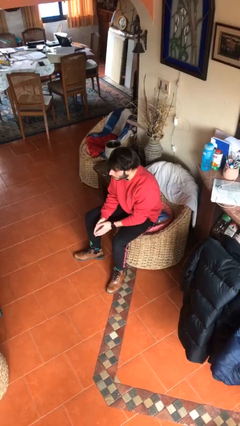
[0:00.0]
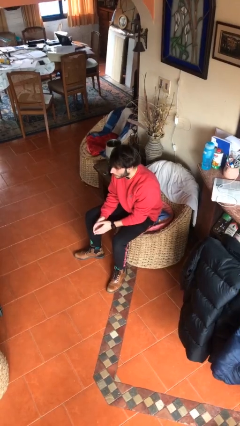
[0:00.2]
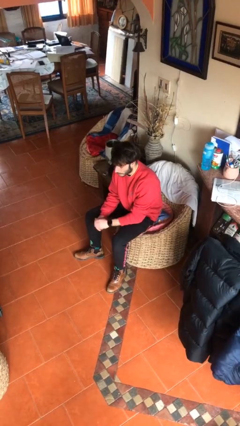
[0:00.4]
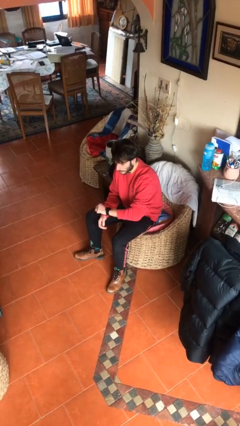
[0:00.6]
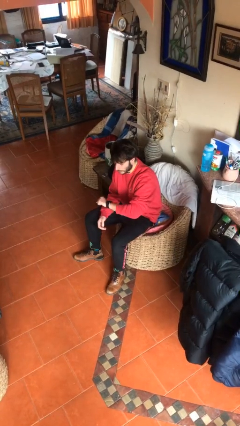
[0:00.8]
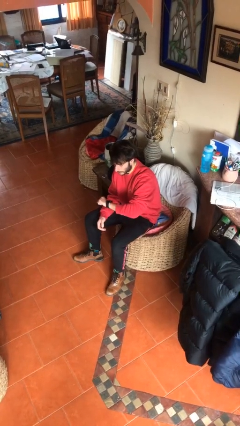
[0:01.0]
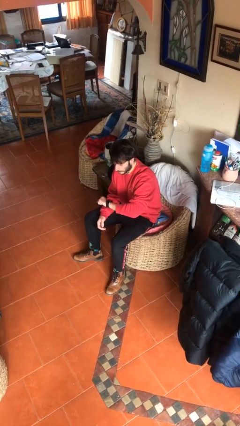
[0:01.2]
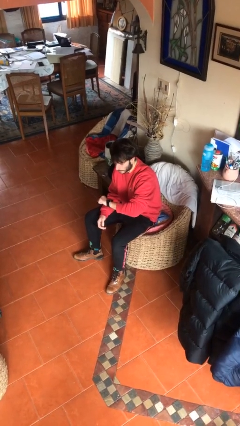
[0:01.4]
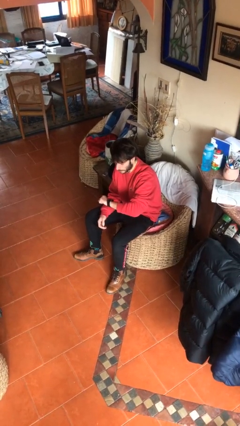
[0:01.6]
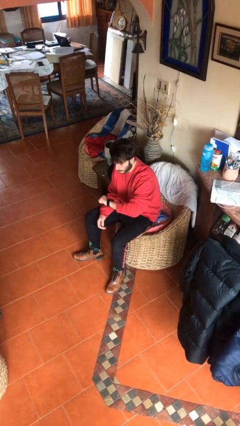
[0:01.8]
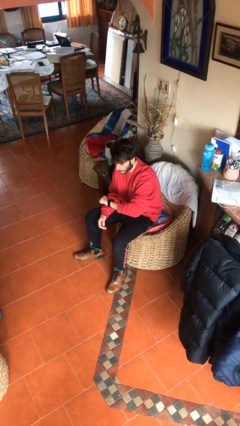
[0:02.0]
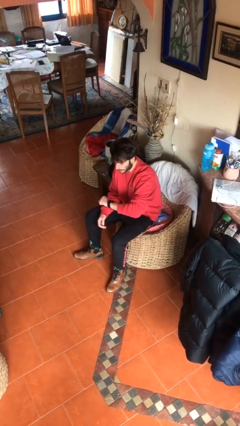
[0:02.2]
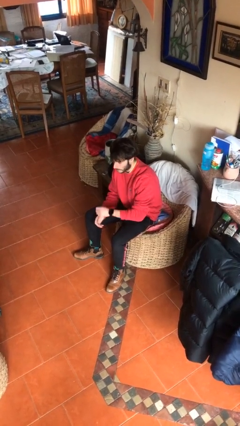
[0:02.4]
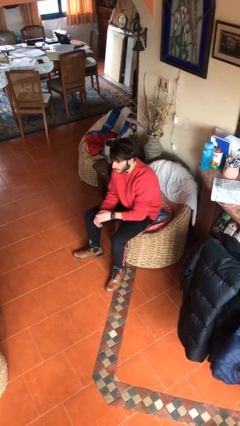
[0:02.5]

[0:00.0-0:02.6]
person looks at wristwatch

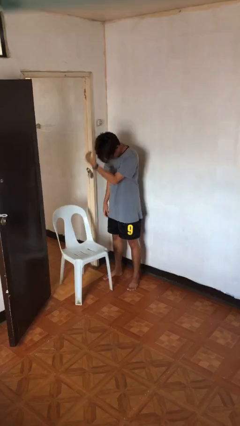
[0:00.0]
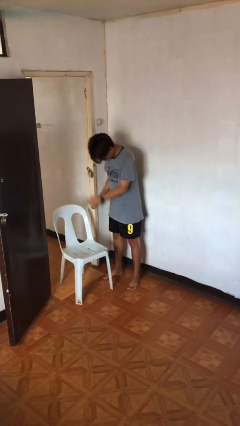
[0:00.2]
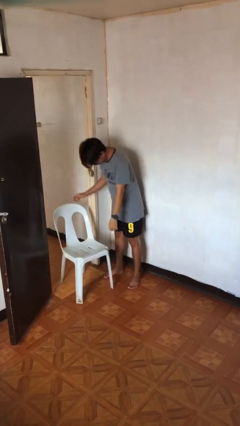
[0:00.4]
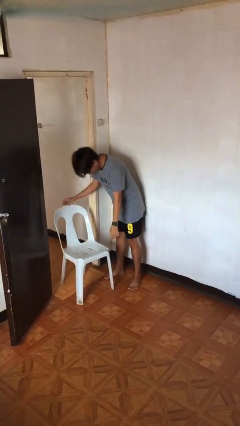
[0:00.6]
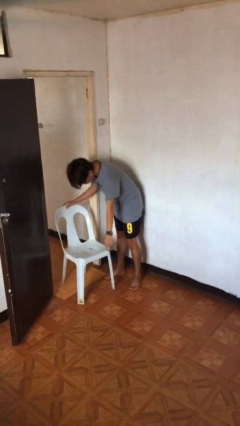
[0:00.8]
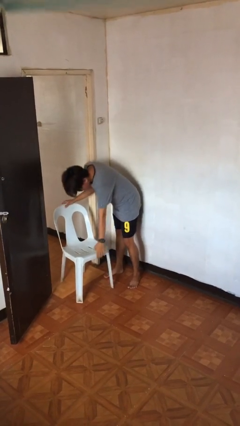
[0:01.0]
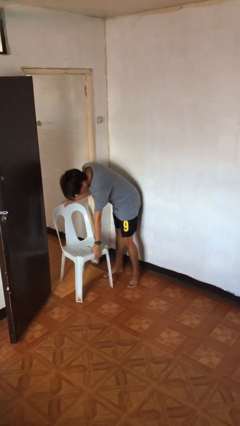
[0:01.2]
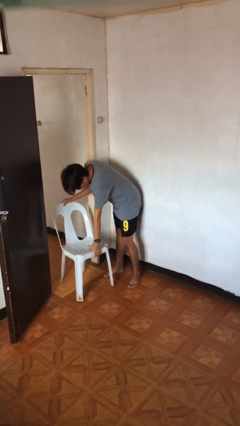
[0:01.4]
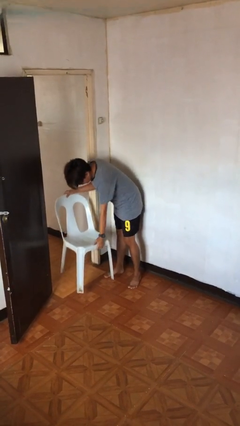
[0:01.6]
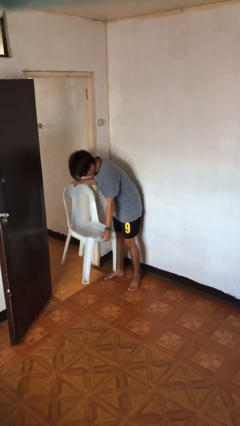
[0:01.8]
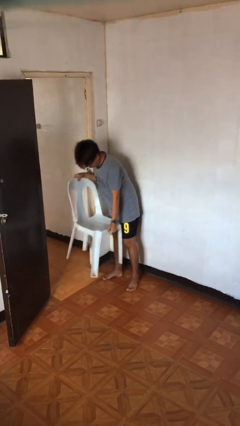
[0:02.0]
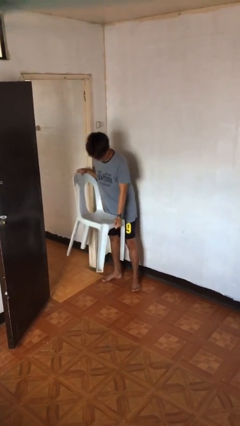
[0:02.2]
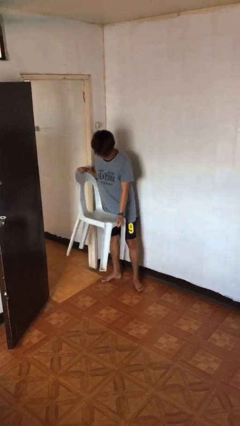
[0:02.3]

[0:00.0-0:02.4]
person picks up object from floor

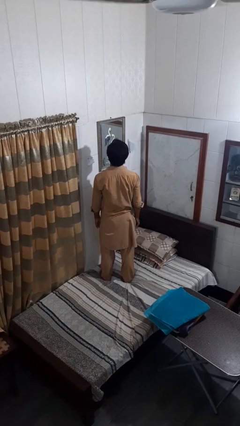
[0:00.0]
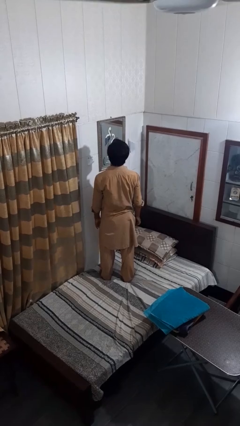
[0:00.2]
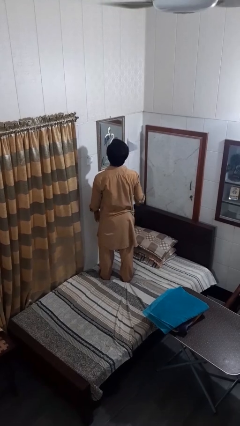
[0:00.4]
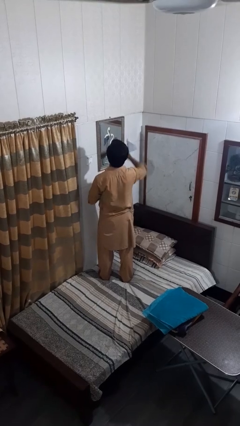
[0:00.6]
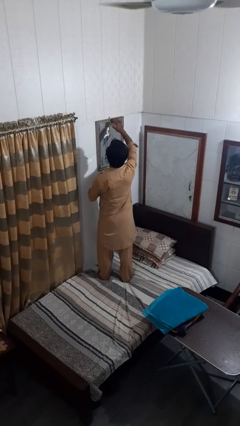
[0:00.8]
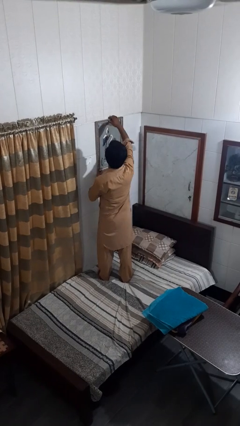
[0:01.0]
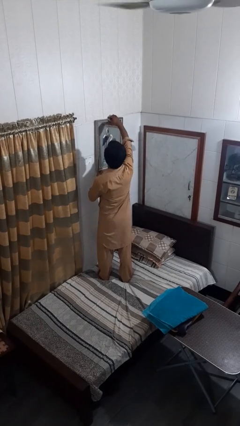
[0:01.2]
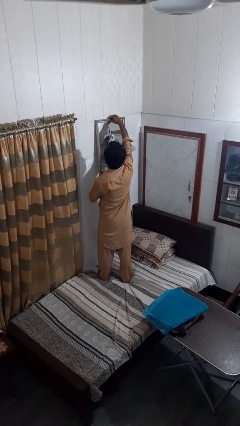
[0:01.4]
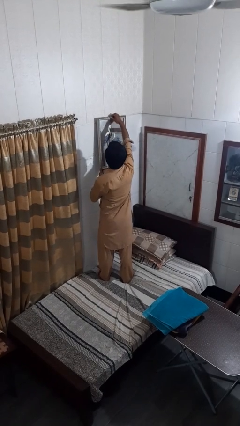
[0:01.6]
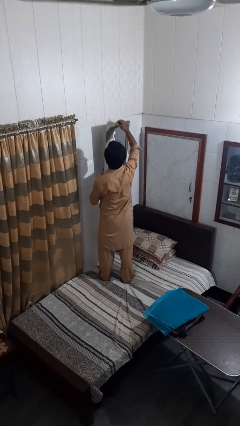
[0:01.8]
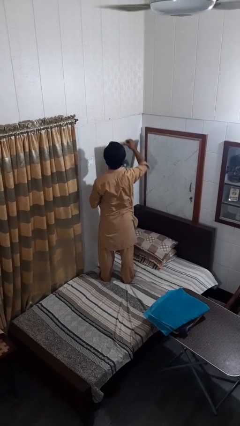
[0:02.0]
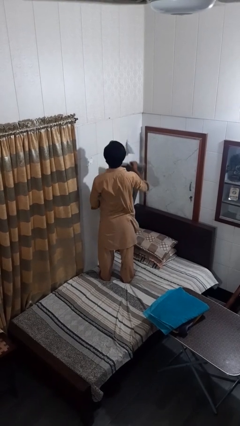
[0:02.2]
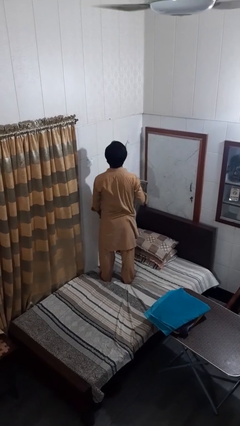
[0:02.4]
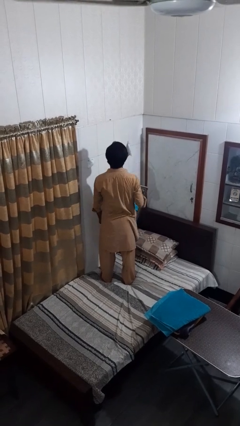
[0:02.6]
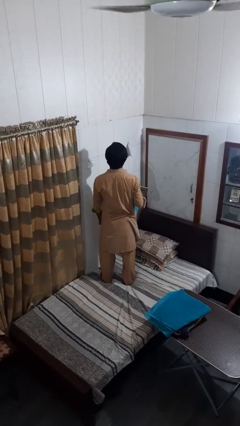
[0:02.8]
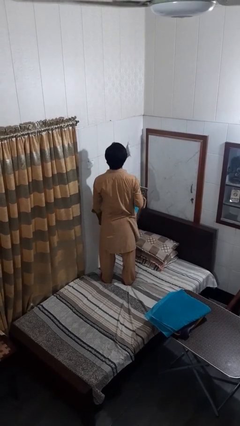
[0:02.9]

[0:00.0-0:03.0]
person takes down picture frame

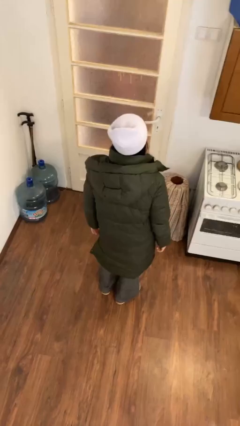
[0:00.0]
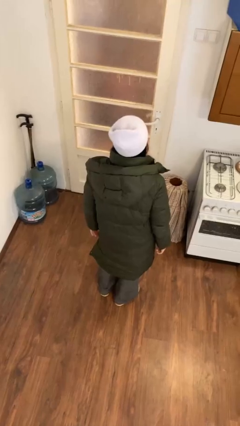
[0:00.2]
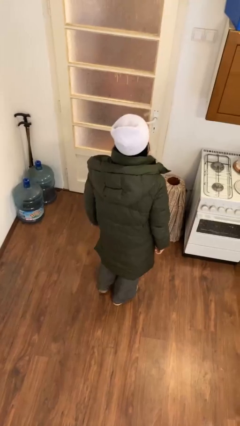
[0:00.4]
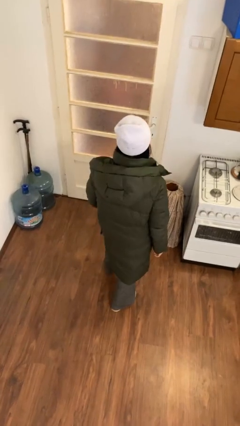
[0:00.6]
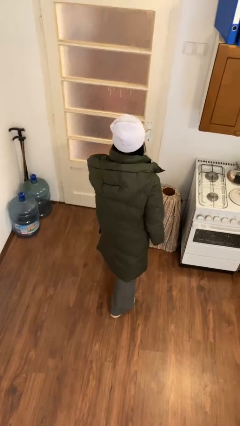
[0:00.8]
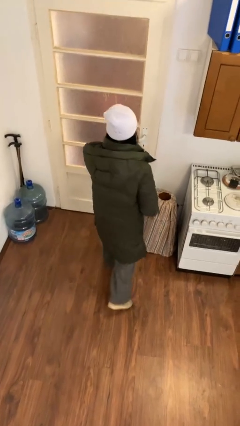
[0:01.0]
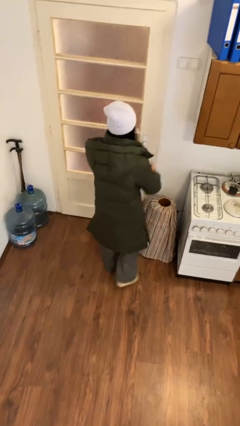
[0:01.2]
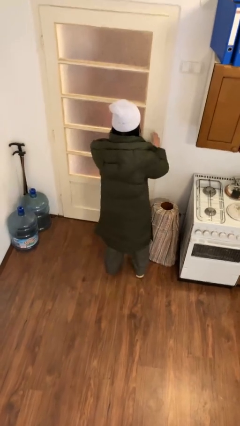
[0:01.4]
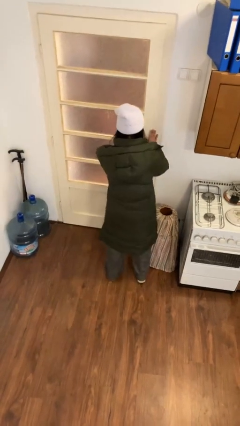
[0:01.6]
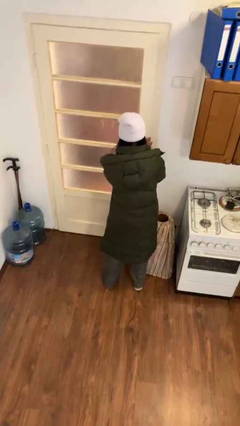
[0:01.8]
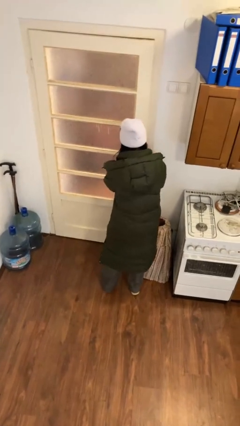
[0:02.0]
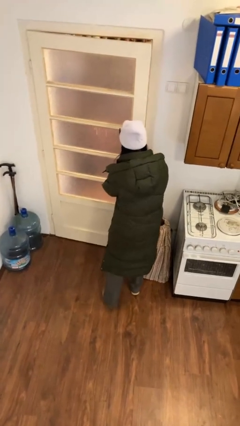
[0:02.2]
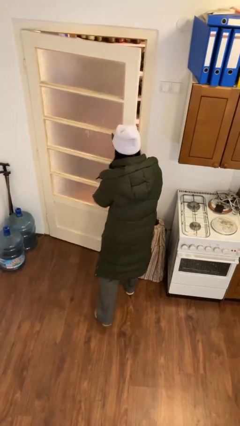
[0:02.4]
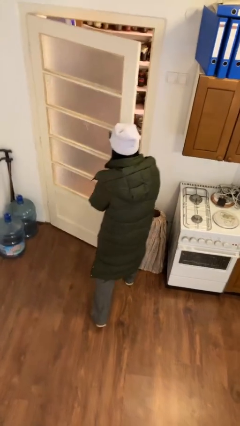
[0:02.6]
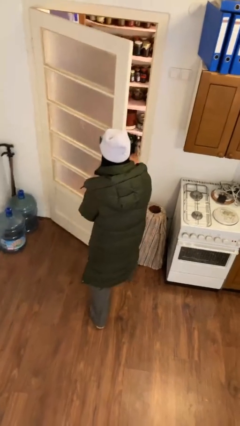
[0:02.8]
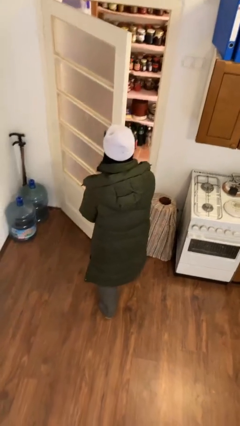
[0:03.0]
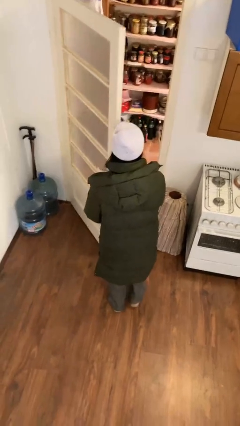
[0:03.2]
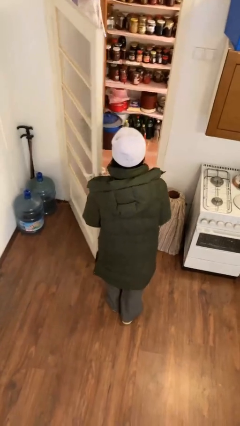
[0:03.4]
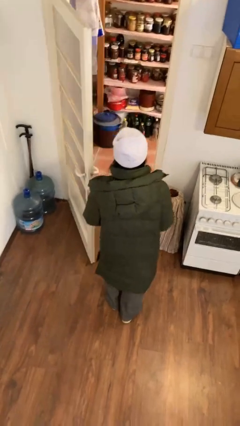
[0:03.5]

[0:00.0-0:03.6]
person opens facility door

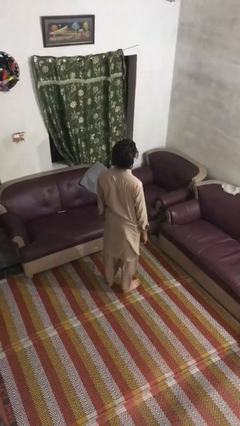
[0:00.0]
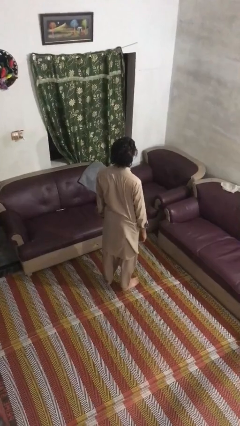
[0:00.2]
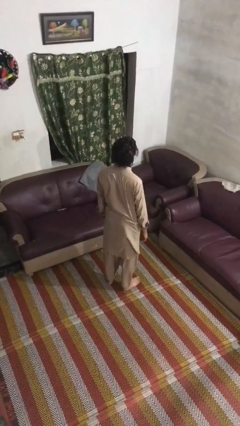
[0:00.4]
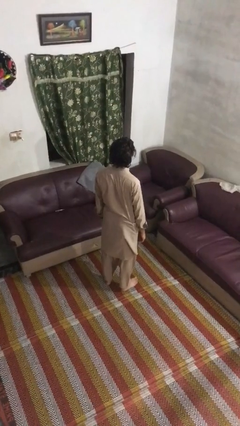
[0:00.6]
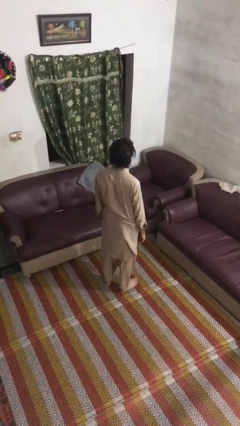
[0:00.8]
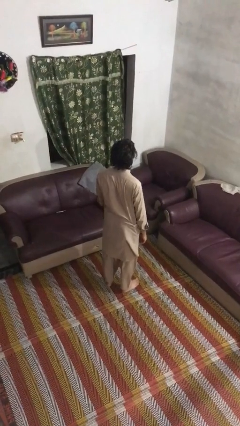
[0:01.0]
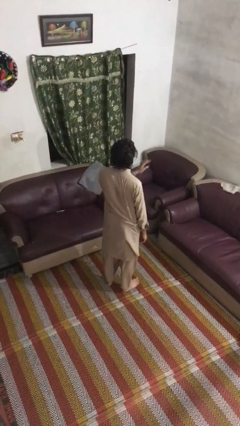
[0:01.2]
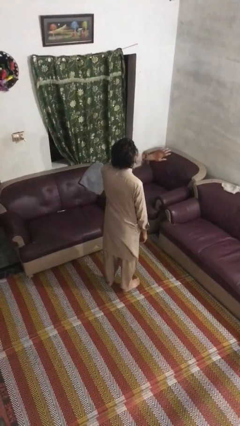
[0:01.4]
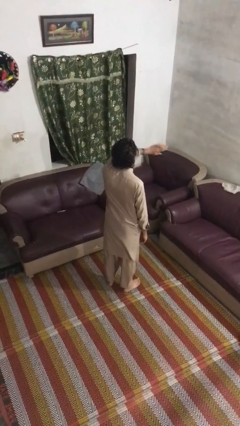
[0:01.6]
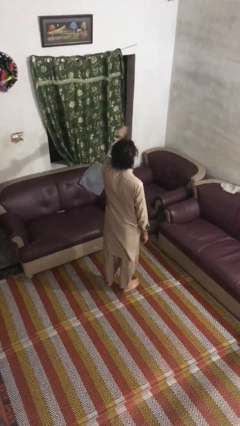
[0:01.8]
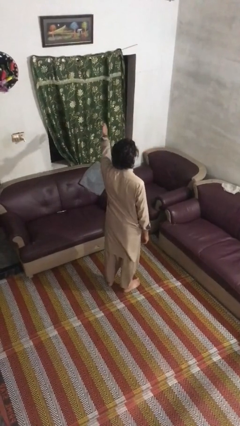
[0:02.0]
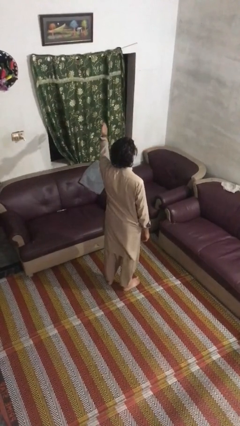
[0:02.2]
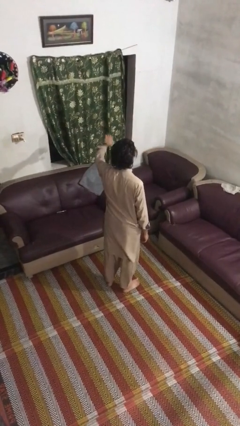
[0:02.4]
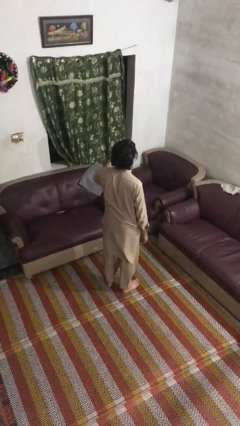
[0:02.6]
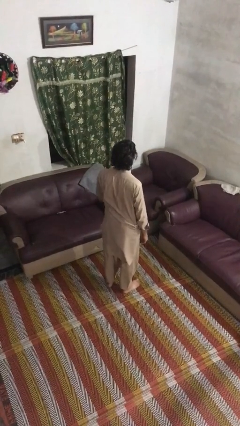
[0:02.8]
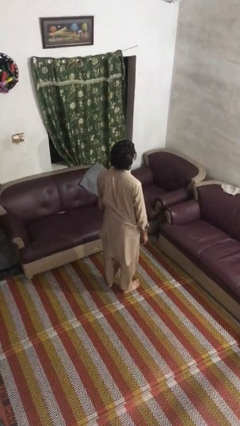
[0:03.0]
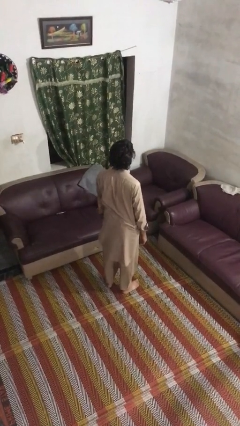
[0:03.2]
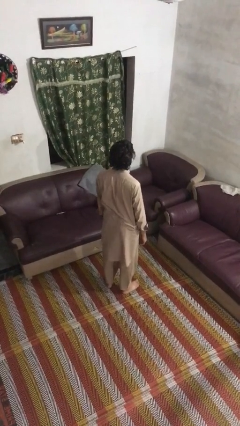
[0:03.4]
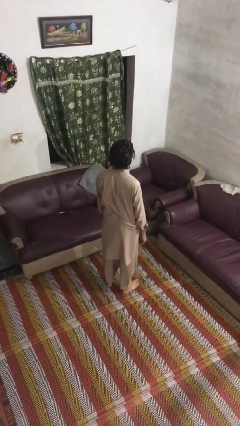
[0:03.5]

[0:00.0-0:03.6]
person gestures swipe left

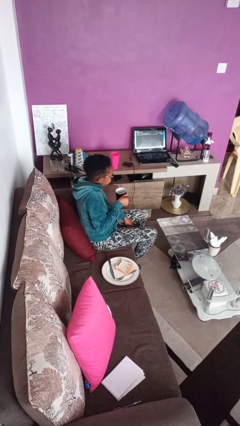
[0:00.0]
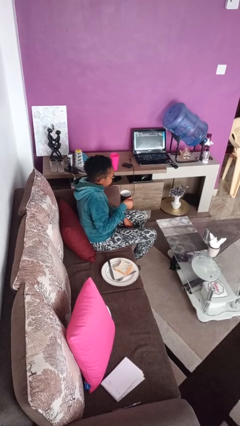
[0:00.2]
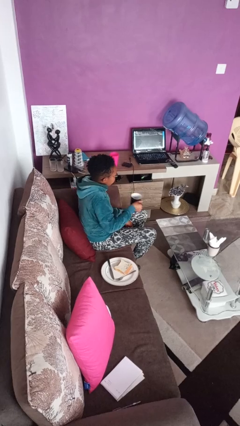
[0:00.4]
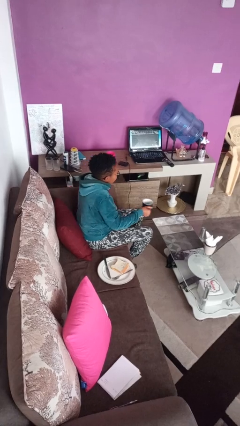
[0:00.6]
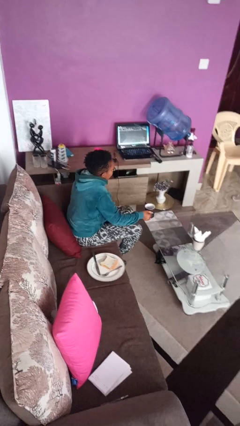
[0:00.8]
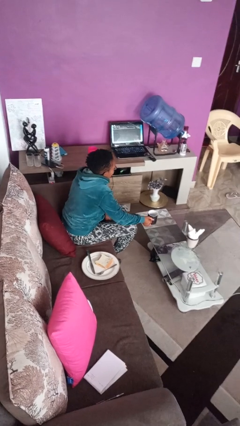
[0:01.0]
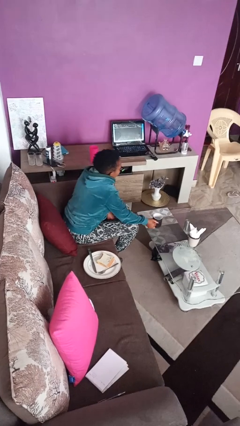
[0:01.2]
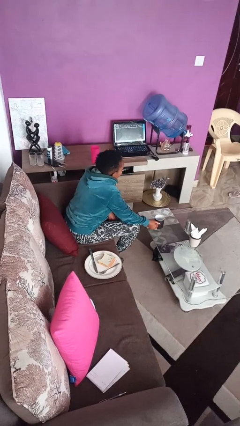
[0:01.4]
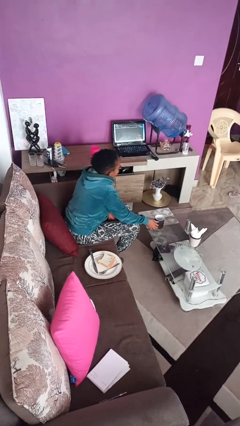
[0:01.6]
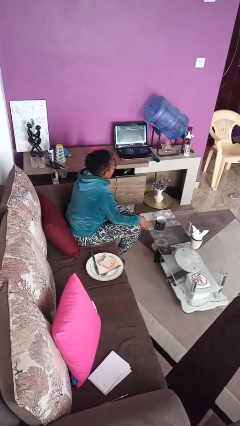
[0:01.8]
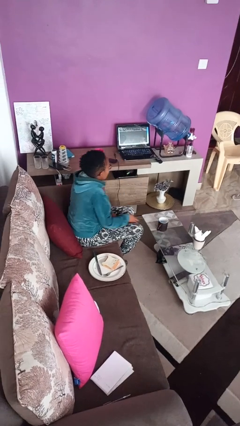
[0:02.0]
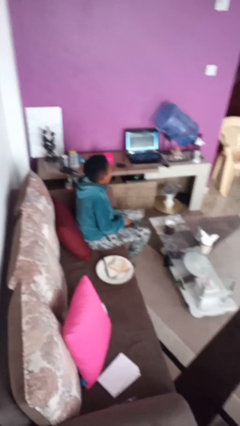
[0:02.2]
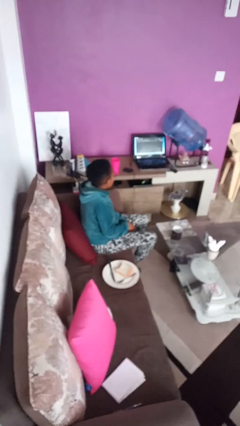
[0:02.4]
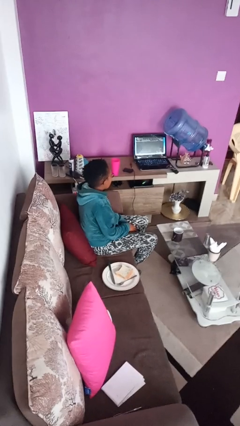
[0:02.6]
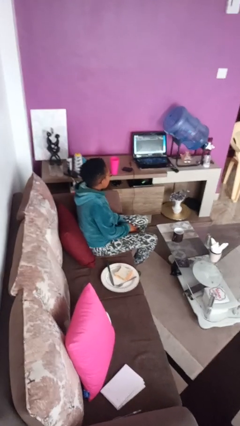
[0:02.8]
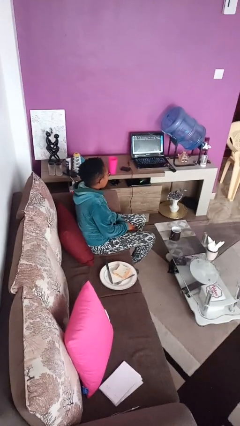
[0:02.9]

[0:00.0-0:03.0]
person puts down object on table
